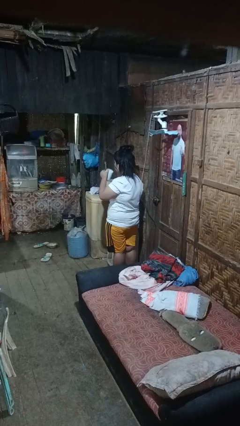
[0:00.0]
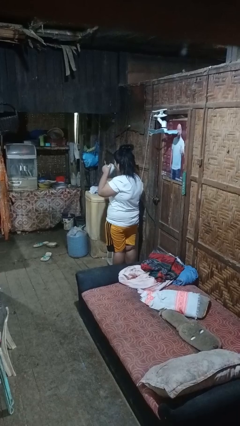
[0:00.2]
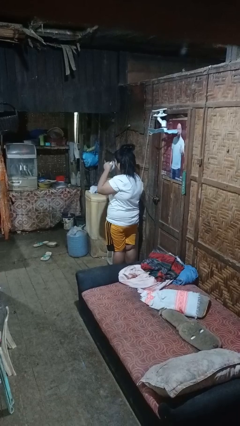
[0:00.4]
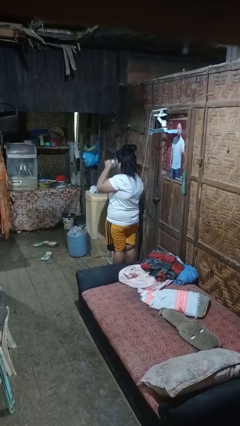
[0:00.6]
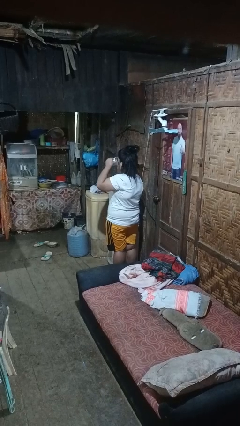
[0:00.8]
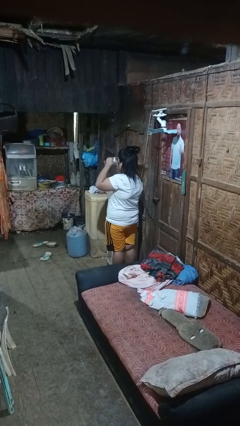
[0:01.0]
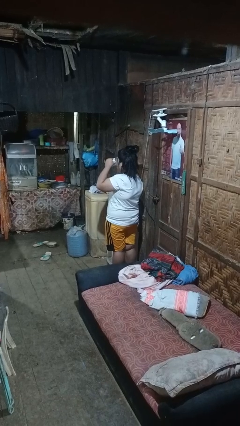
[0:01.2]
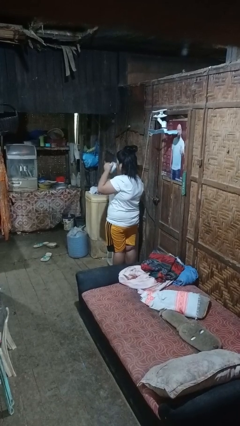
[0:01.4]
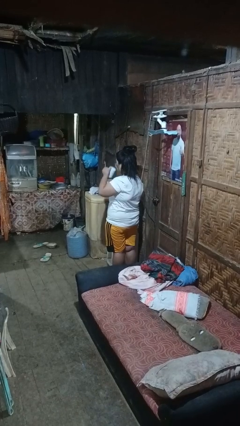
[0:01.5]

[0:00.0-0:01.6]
person drinks from mug

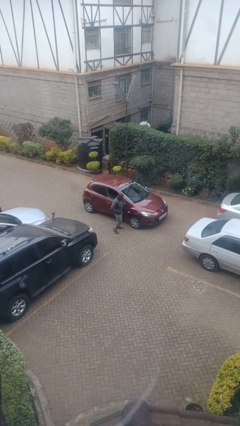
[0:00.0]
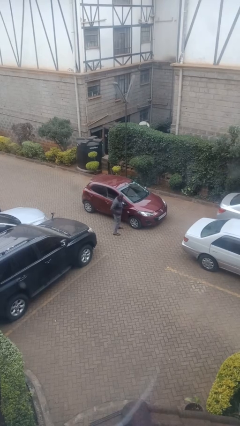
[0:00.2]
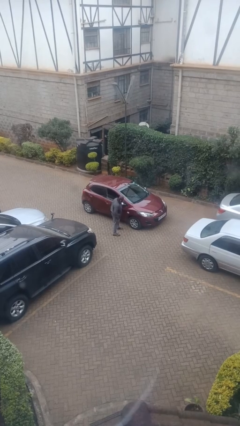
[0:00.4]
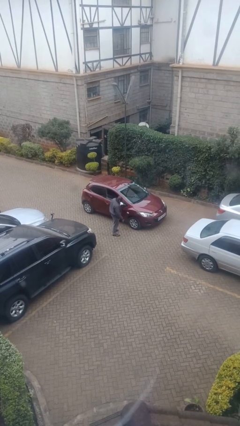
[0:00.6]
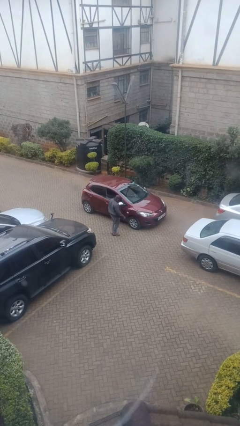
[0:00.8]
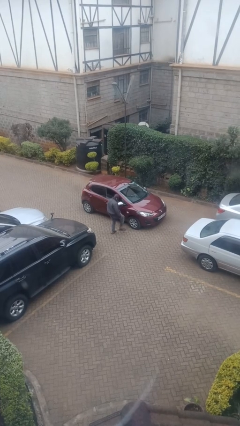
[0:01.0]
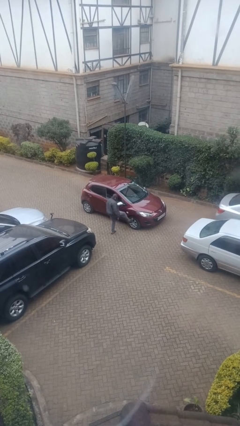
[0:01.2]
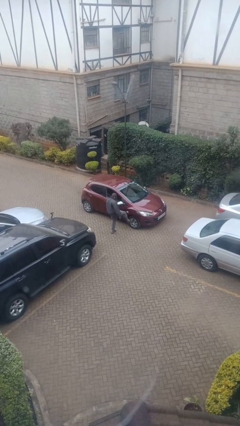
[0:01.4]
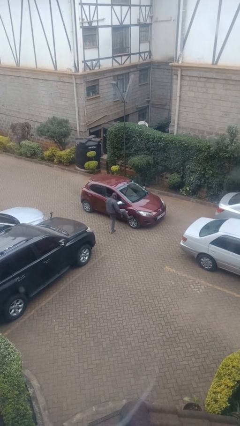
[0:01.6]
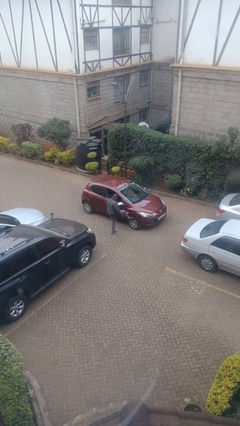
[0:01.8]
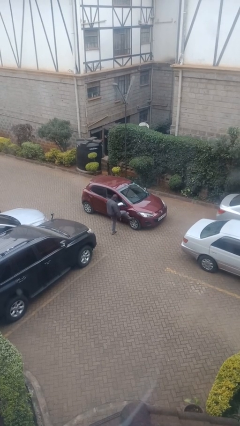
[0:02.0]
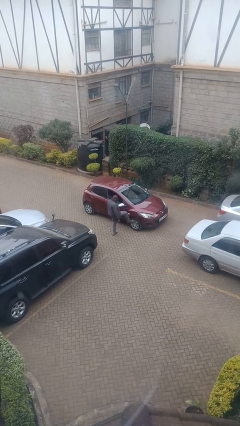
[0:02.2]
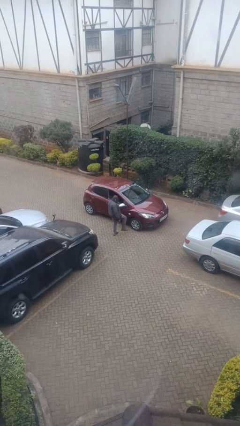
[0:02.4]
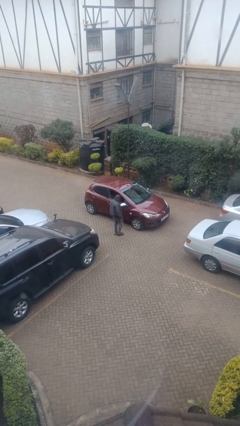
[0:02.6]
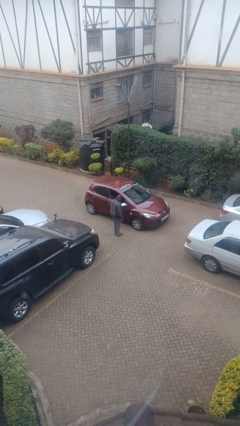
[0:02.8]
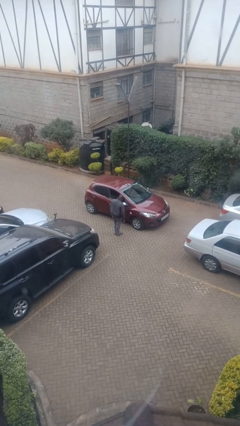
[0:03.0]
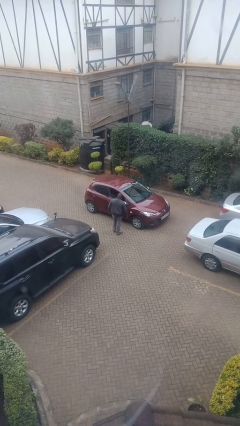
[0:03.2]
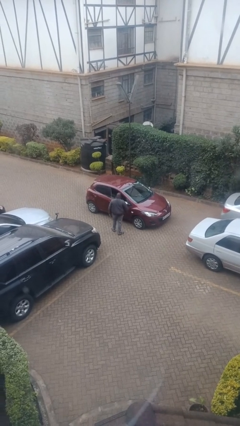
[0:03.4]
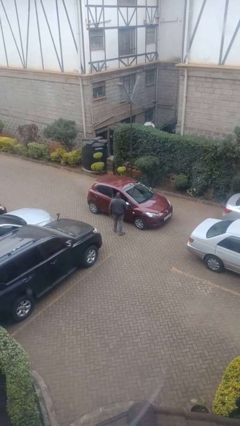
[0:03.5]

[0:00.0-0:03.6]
person kicks car tires

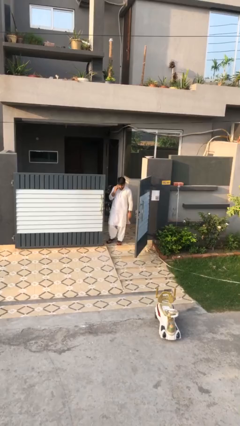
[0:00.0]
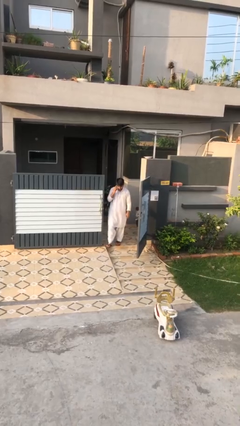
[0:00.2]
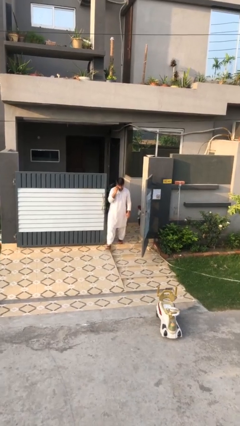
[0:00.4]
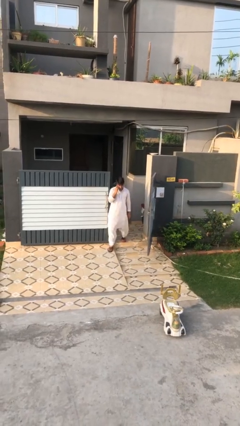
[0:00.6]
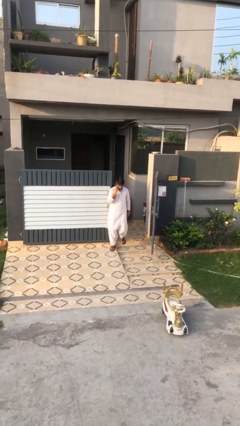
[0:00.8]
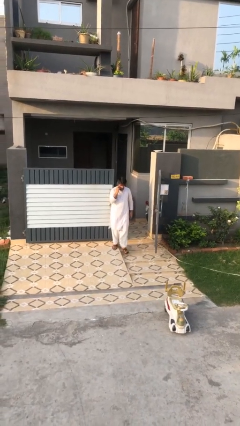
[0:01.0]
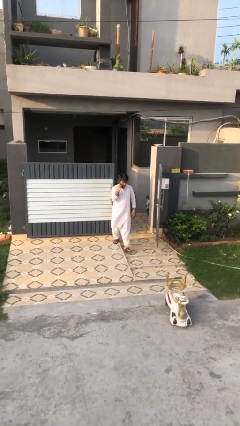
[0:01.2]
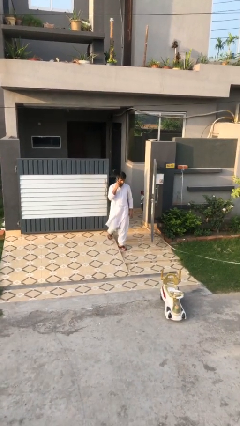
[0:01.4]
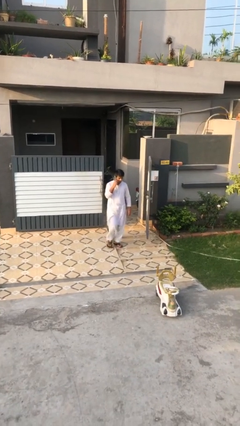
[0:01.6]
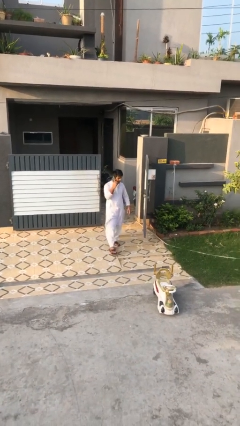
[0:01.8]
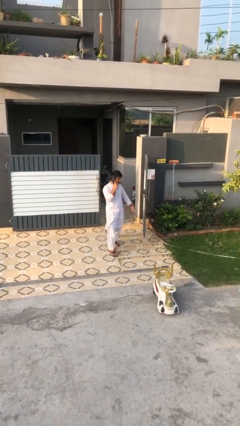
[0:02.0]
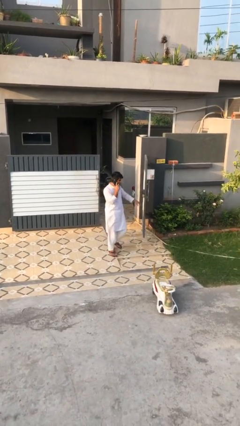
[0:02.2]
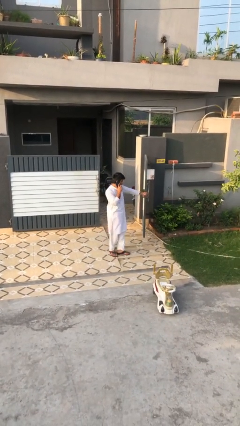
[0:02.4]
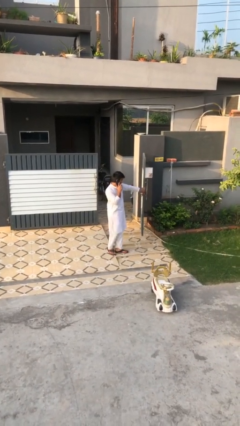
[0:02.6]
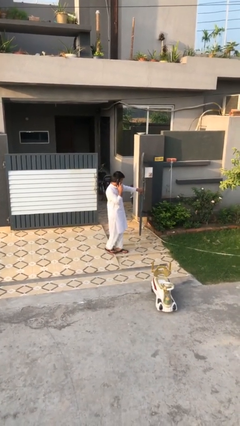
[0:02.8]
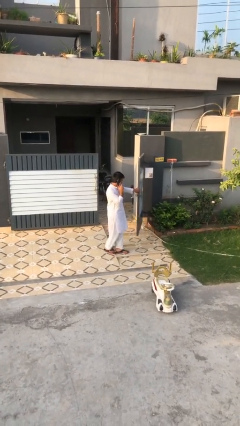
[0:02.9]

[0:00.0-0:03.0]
person enters scene through structure

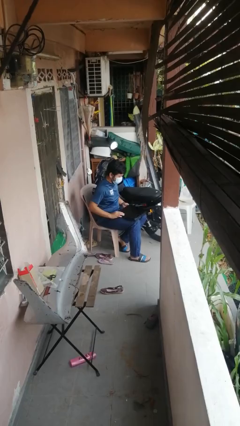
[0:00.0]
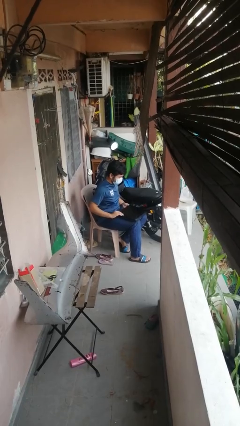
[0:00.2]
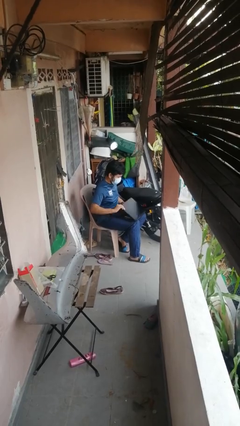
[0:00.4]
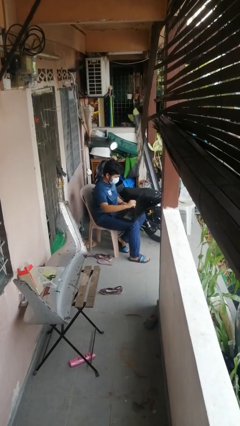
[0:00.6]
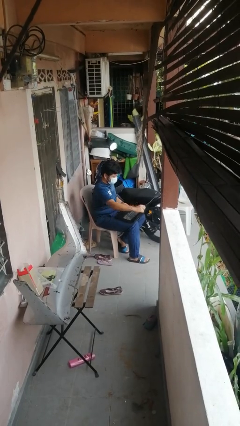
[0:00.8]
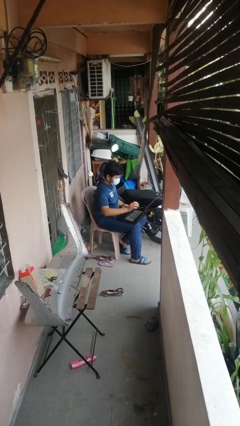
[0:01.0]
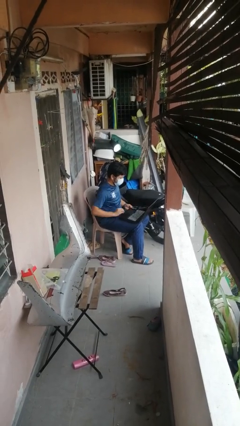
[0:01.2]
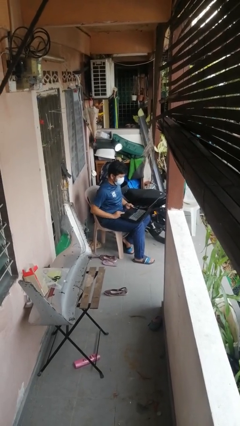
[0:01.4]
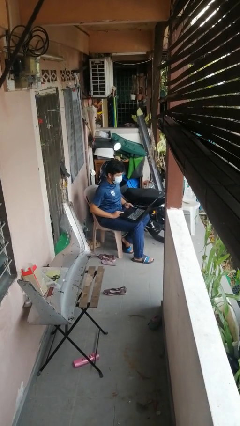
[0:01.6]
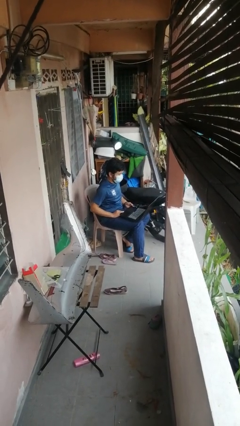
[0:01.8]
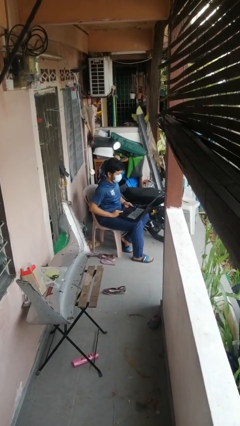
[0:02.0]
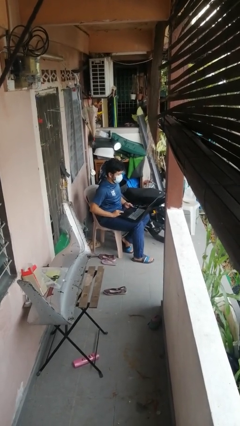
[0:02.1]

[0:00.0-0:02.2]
person opens laptop

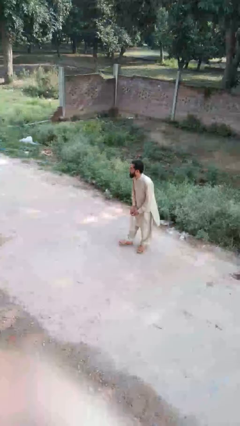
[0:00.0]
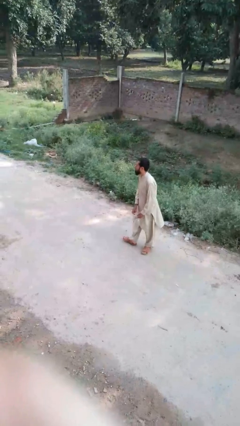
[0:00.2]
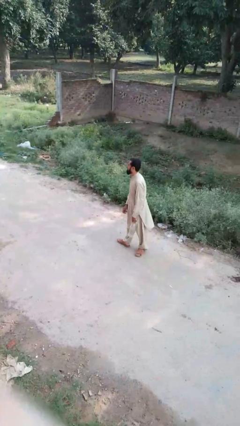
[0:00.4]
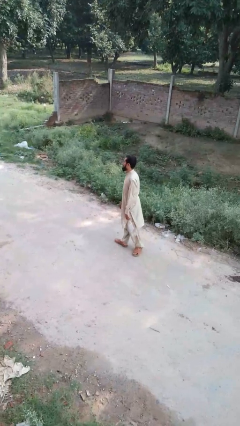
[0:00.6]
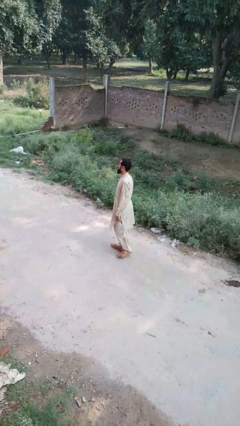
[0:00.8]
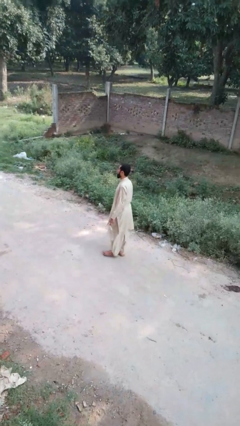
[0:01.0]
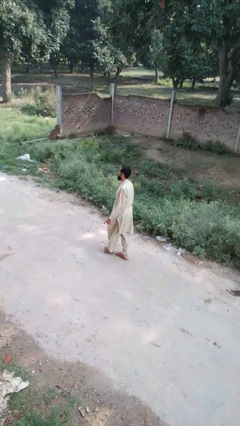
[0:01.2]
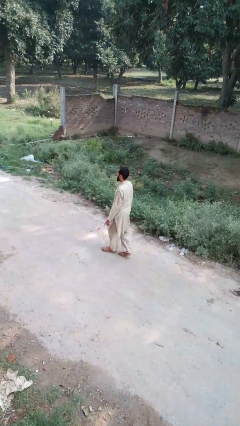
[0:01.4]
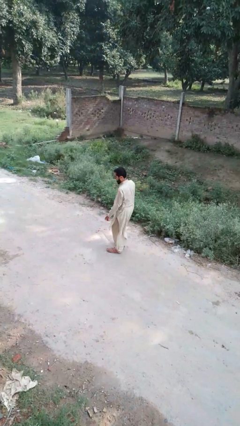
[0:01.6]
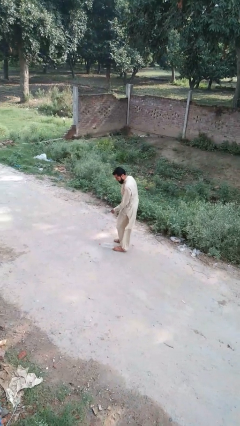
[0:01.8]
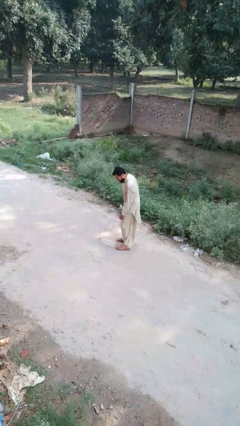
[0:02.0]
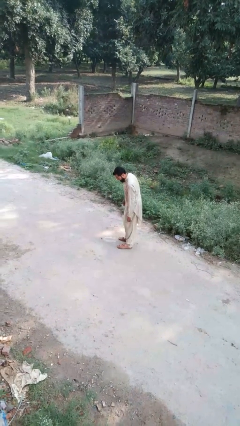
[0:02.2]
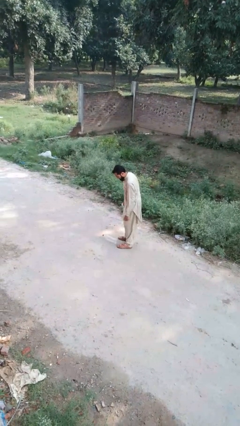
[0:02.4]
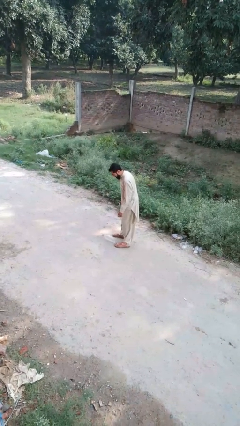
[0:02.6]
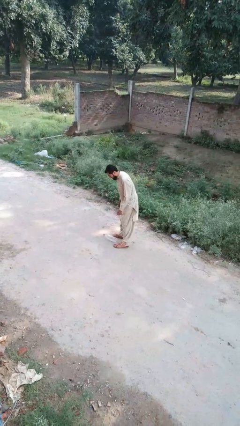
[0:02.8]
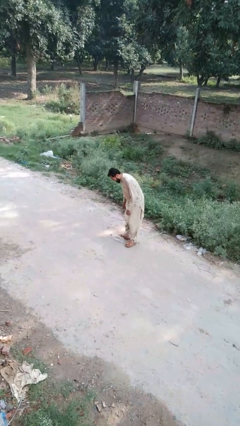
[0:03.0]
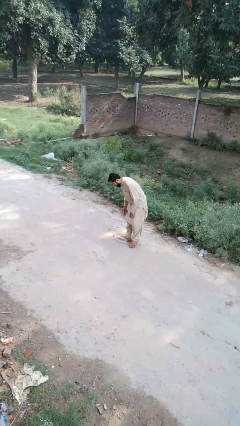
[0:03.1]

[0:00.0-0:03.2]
person drops object

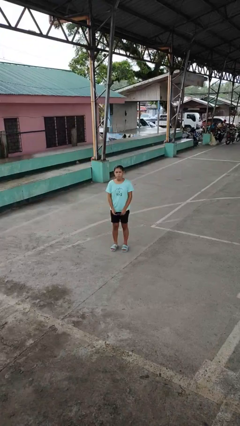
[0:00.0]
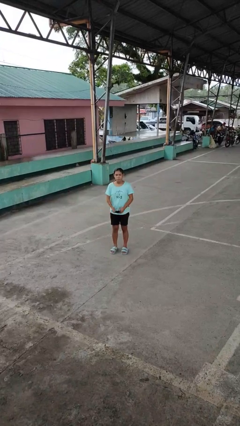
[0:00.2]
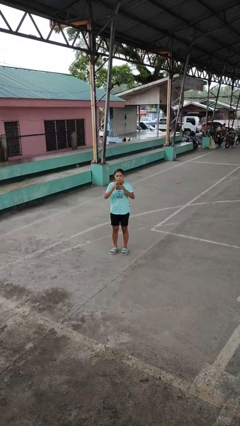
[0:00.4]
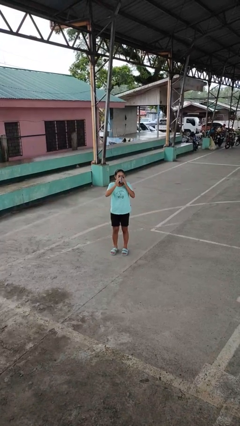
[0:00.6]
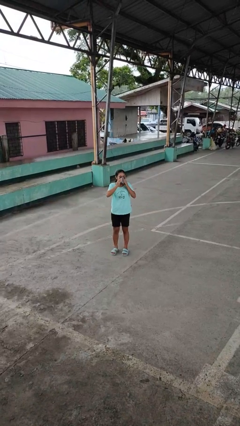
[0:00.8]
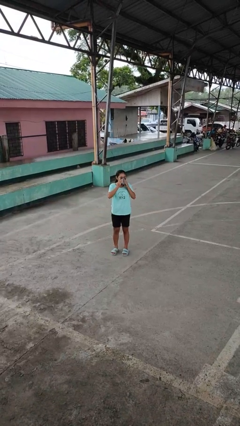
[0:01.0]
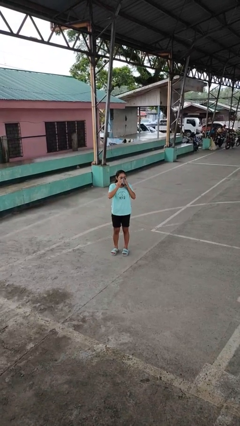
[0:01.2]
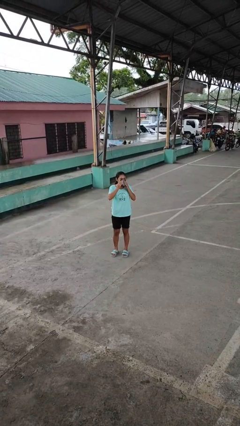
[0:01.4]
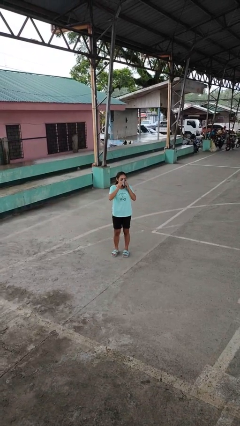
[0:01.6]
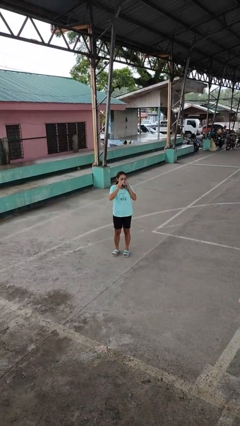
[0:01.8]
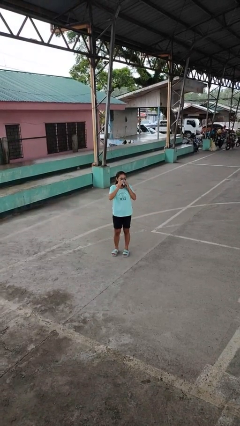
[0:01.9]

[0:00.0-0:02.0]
person blows nose

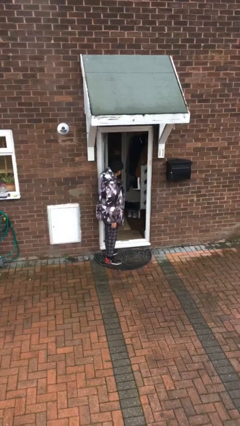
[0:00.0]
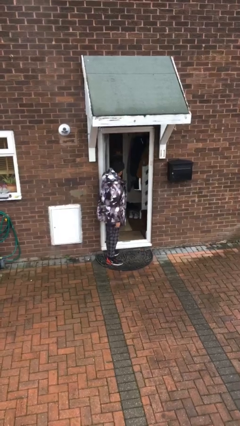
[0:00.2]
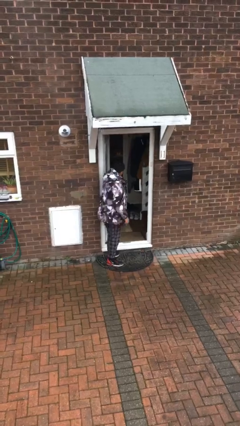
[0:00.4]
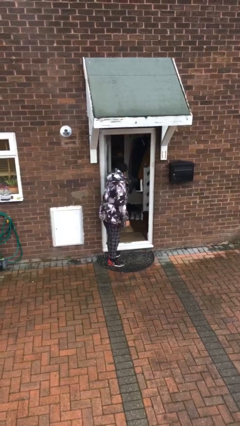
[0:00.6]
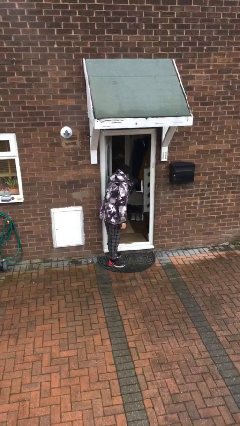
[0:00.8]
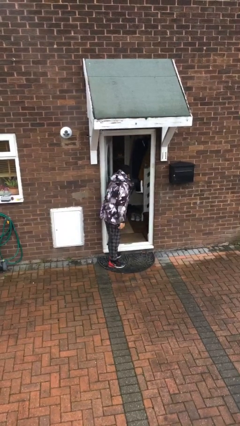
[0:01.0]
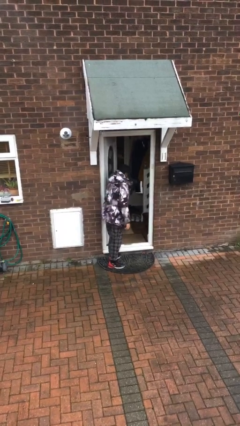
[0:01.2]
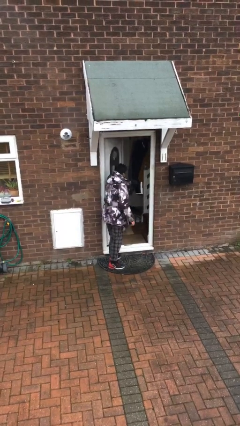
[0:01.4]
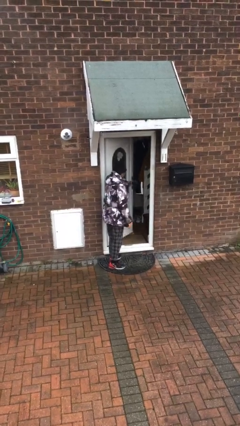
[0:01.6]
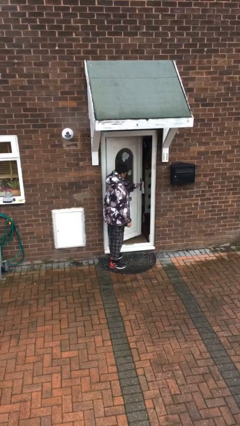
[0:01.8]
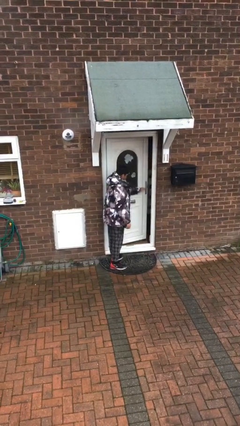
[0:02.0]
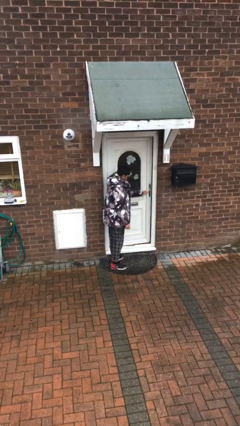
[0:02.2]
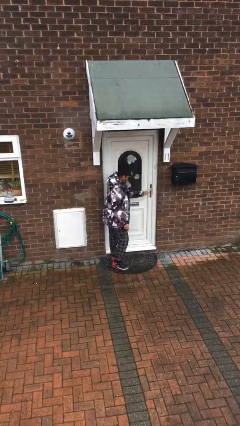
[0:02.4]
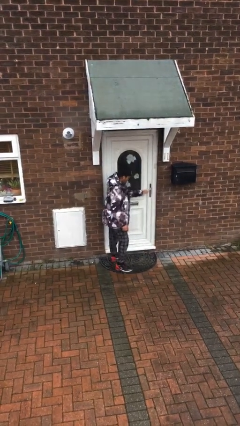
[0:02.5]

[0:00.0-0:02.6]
person closes facility door
